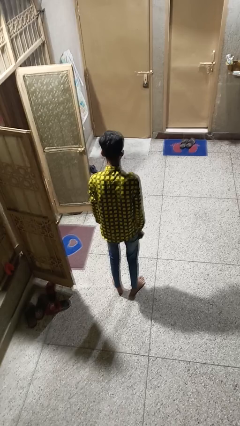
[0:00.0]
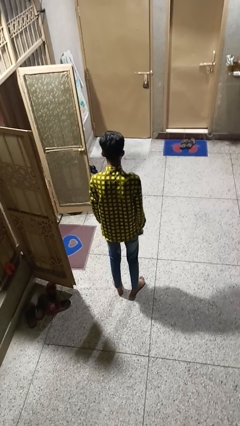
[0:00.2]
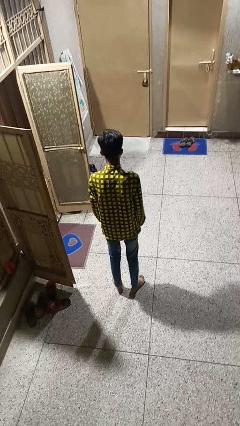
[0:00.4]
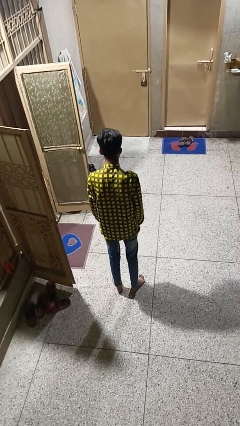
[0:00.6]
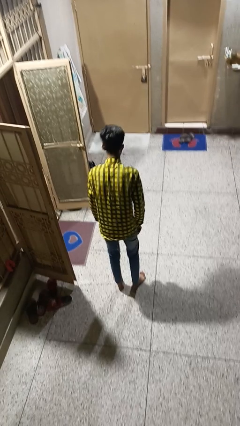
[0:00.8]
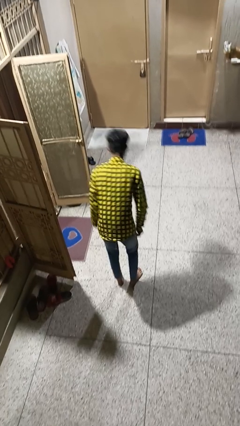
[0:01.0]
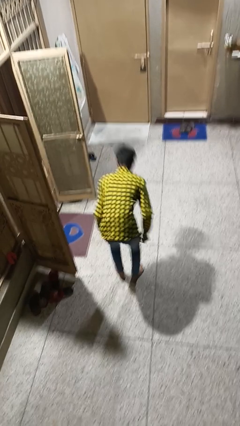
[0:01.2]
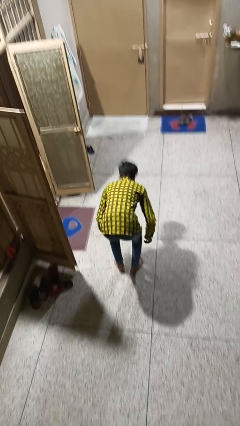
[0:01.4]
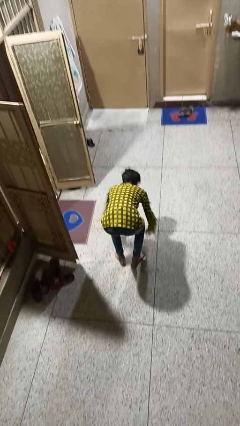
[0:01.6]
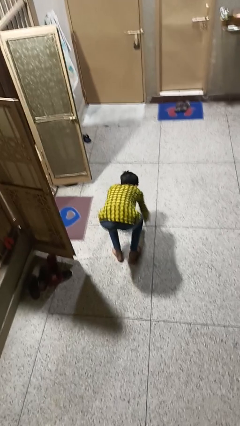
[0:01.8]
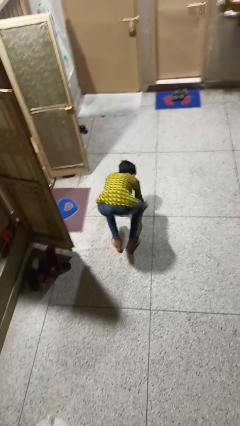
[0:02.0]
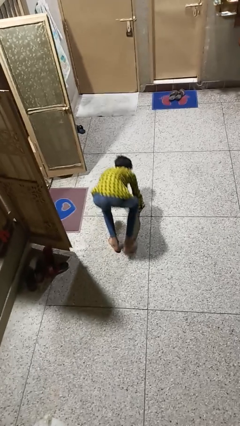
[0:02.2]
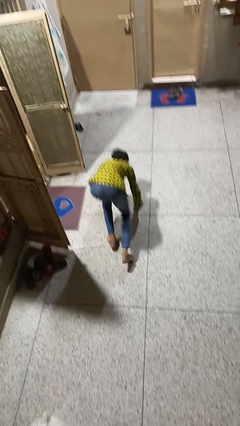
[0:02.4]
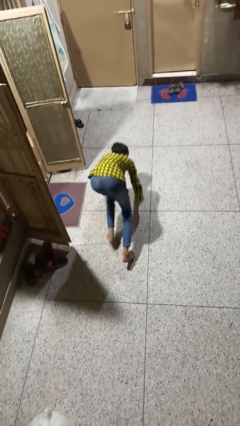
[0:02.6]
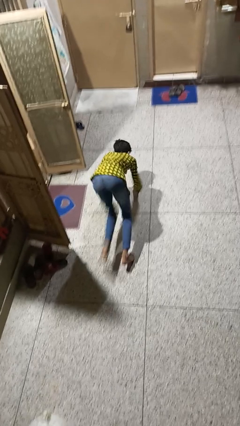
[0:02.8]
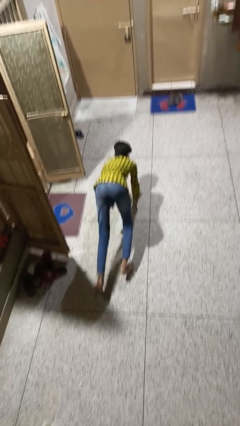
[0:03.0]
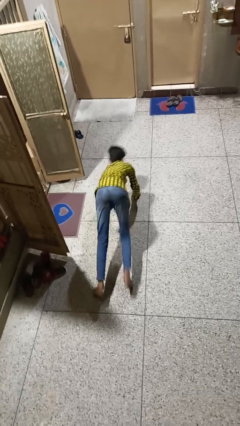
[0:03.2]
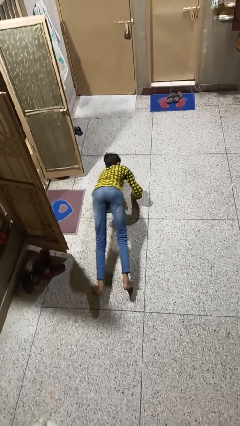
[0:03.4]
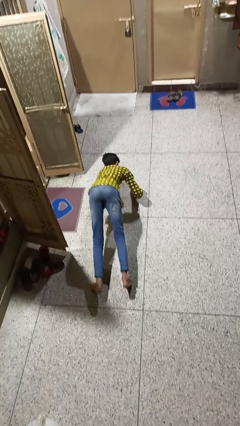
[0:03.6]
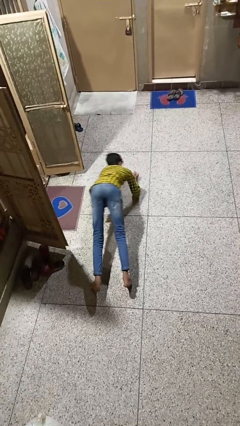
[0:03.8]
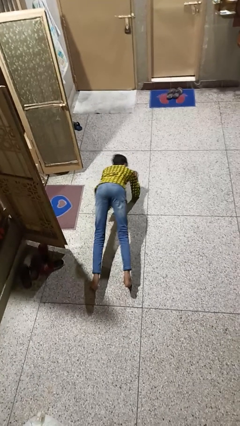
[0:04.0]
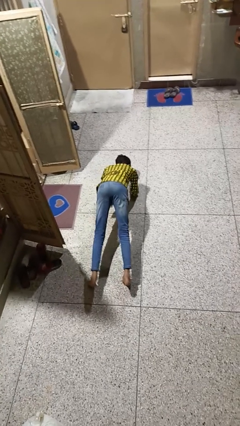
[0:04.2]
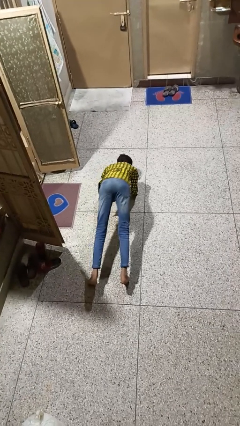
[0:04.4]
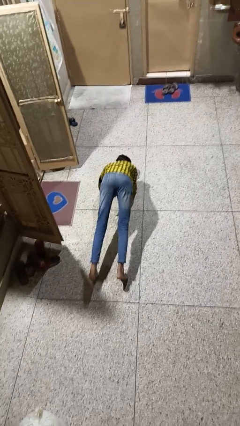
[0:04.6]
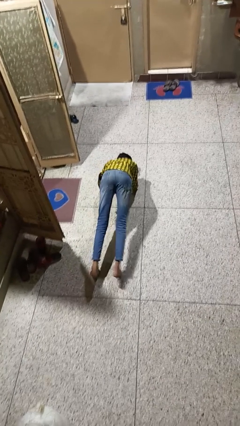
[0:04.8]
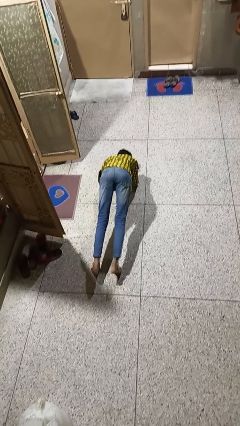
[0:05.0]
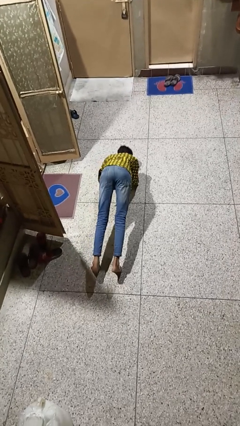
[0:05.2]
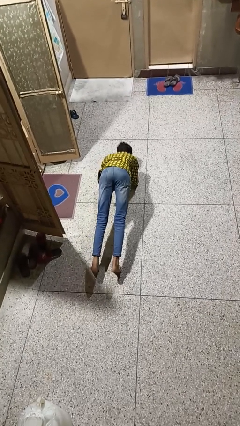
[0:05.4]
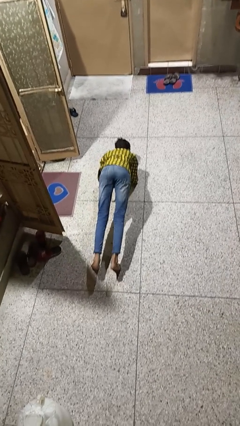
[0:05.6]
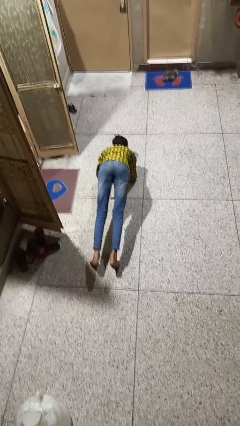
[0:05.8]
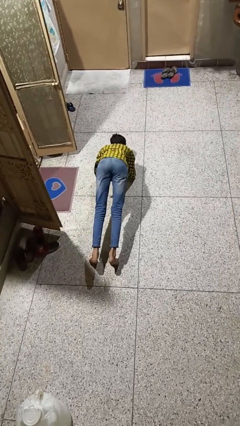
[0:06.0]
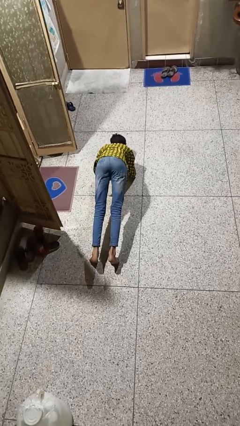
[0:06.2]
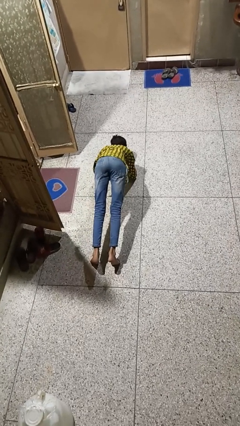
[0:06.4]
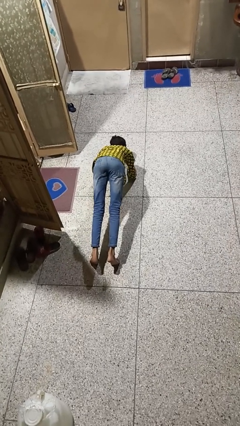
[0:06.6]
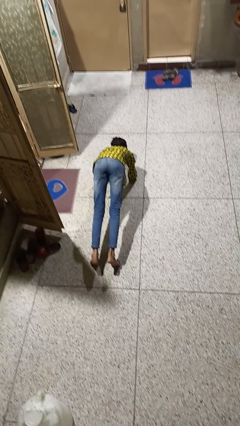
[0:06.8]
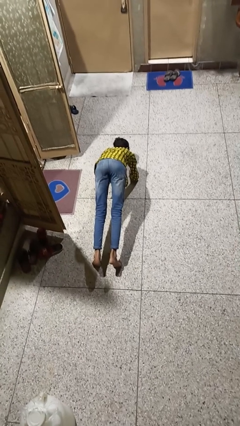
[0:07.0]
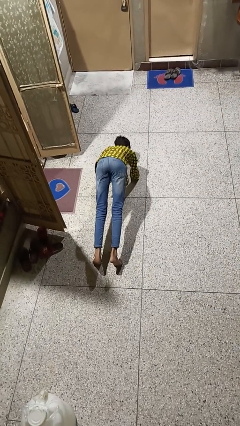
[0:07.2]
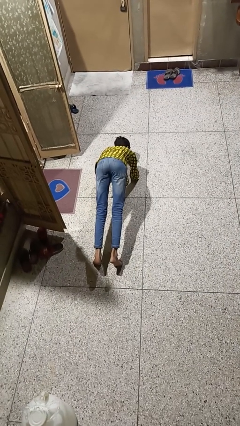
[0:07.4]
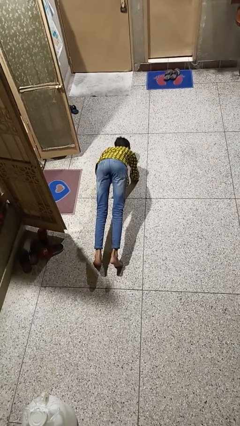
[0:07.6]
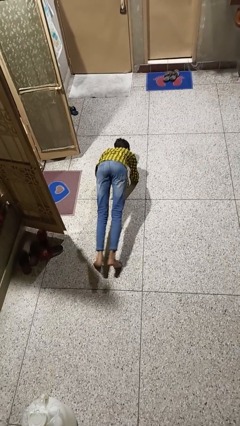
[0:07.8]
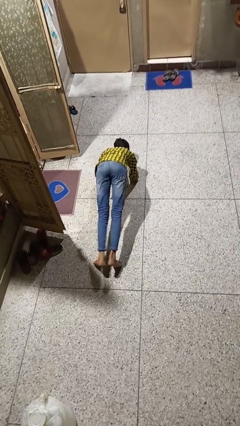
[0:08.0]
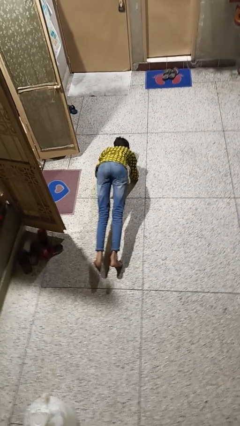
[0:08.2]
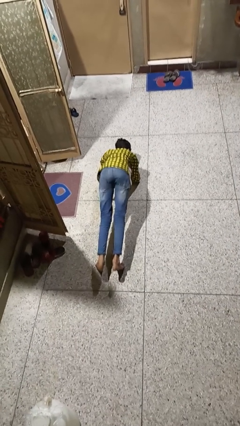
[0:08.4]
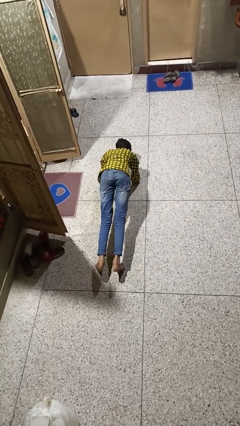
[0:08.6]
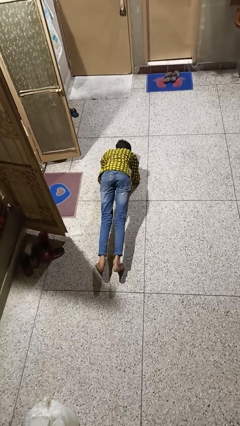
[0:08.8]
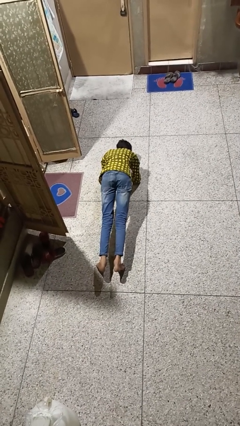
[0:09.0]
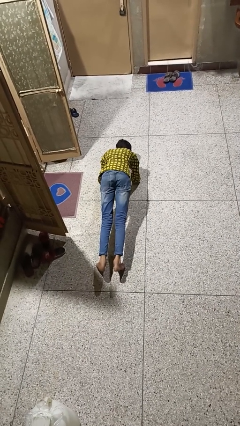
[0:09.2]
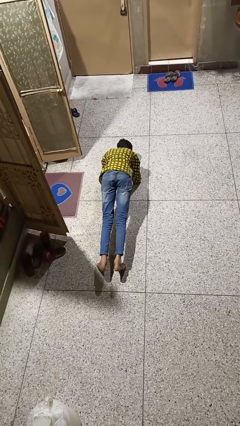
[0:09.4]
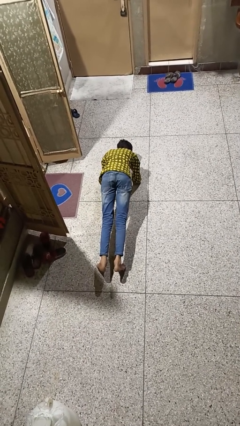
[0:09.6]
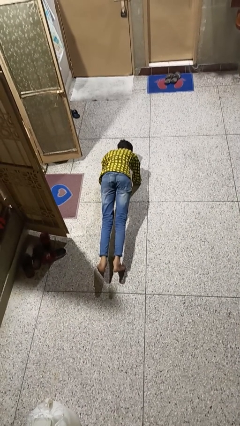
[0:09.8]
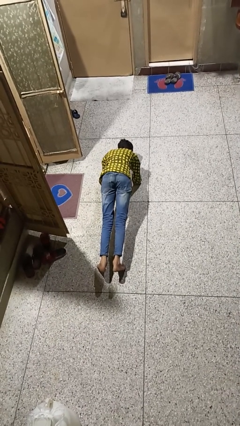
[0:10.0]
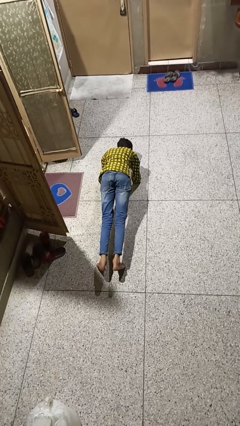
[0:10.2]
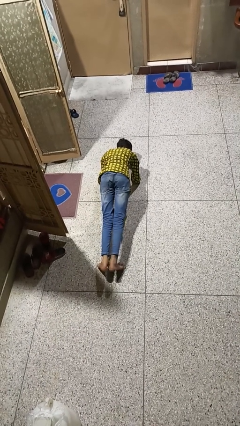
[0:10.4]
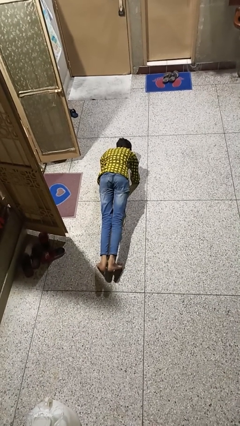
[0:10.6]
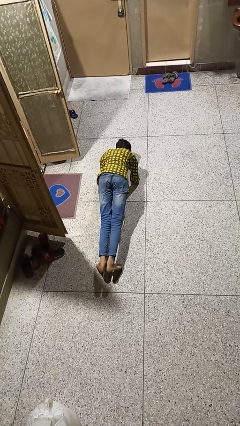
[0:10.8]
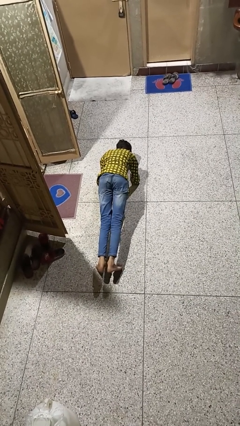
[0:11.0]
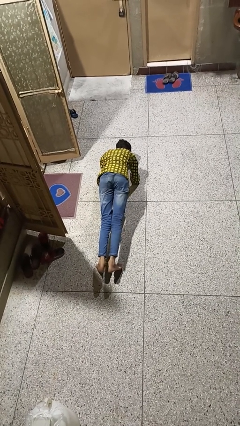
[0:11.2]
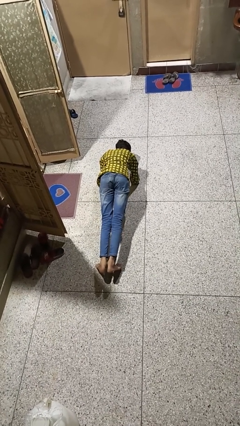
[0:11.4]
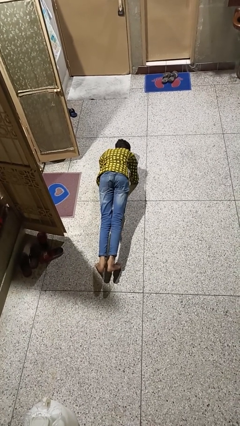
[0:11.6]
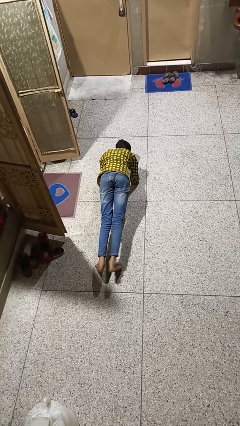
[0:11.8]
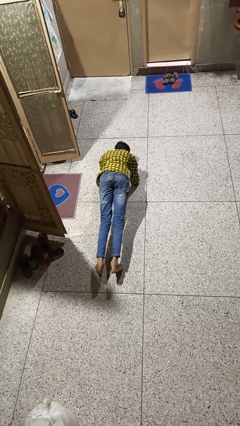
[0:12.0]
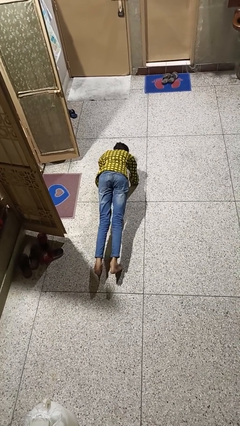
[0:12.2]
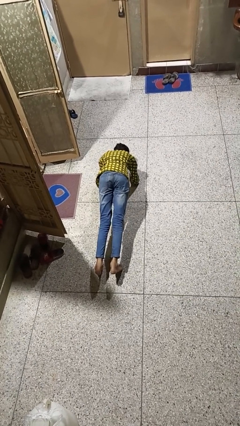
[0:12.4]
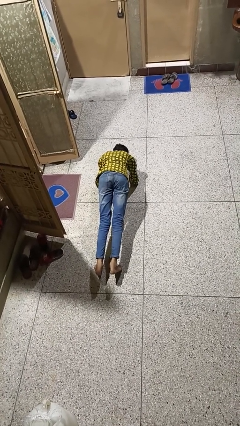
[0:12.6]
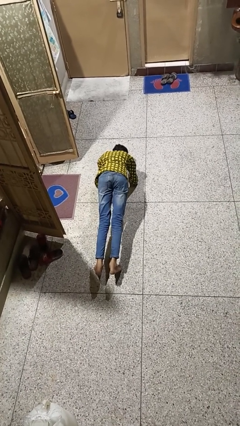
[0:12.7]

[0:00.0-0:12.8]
person exercises with plank

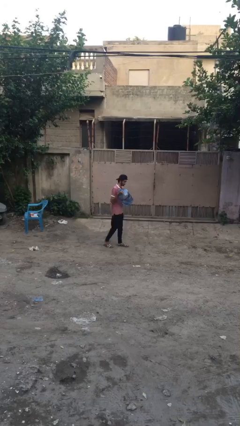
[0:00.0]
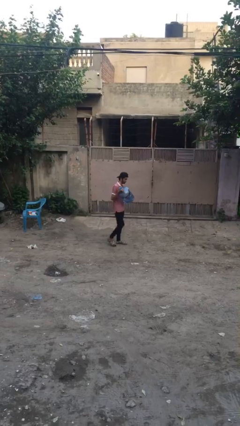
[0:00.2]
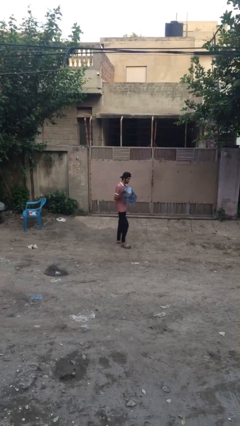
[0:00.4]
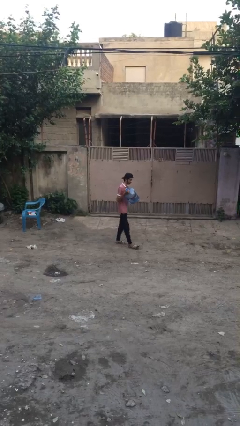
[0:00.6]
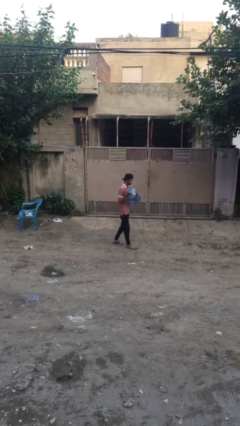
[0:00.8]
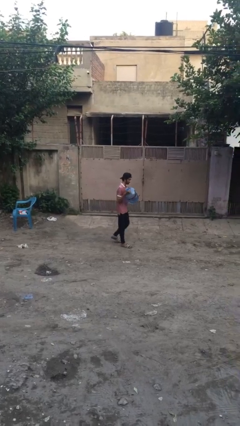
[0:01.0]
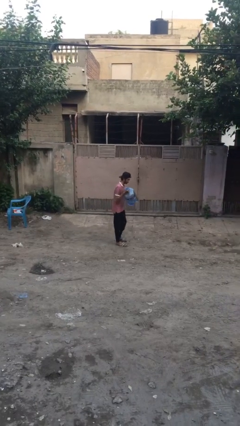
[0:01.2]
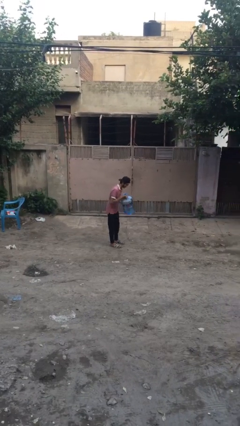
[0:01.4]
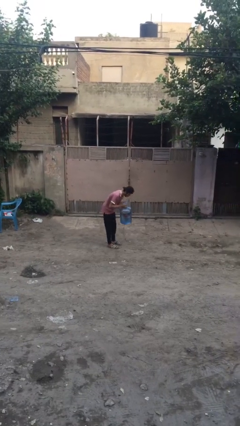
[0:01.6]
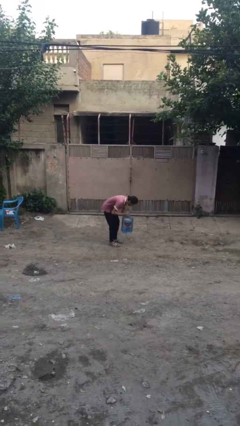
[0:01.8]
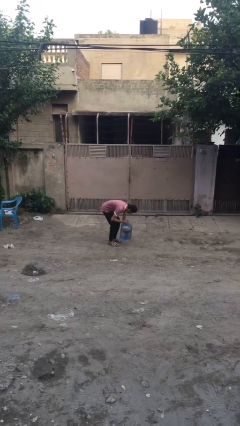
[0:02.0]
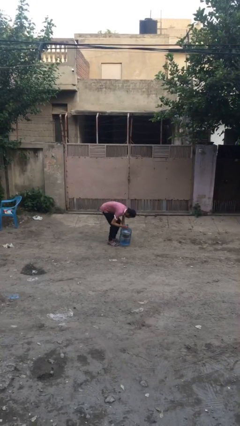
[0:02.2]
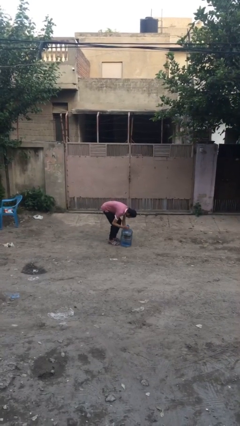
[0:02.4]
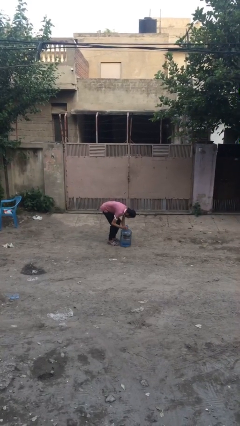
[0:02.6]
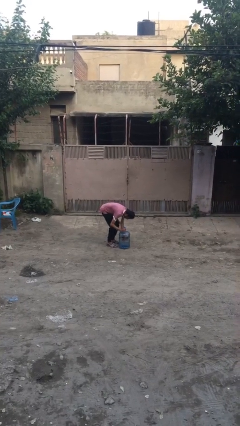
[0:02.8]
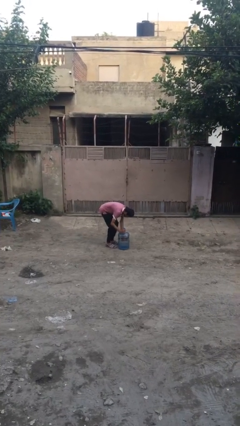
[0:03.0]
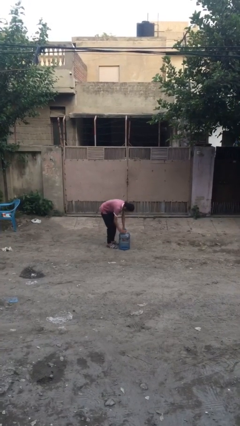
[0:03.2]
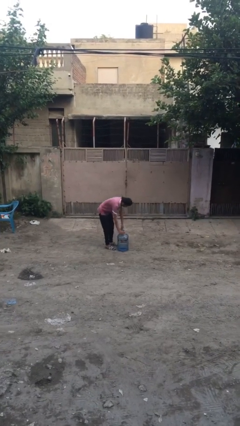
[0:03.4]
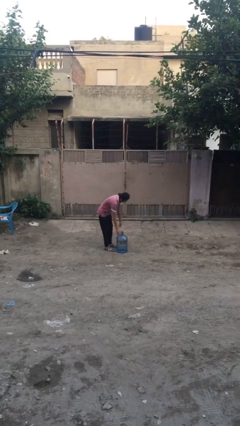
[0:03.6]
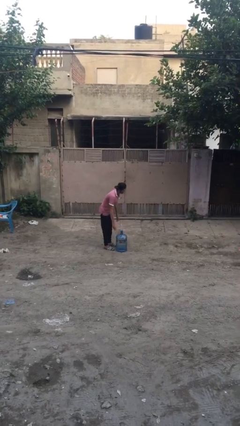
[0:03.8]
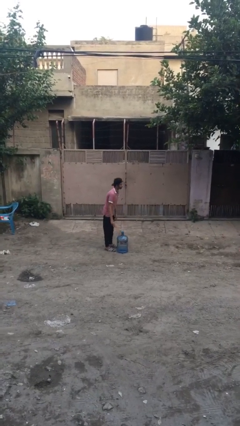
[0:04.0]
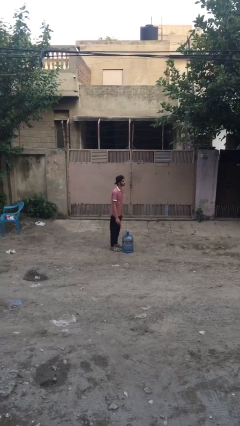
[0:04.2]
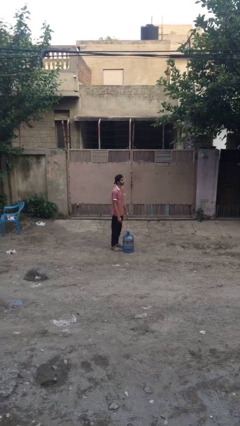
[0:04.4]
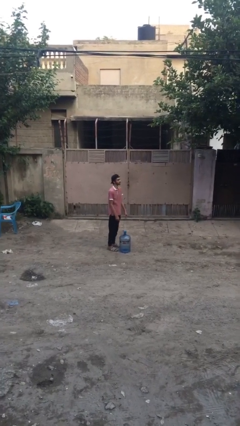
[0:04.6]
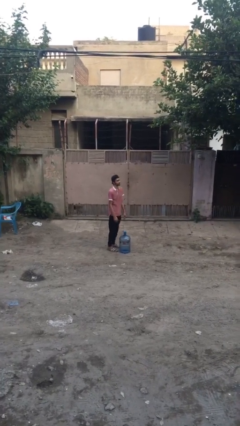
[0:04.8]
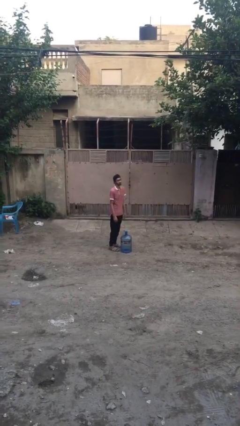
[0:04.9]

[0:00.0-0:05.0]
person puts down object on floor
